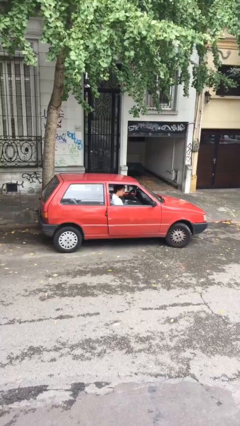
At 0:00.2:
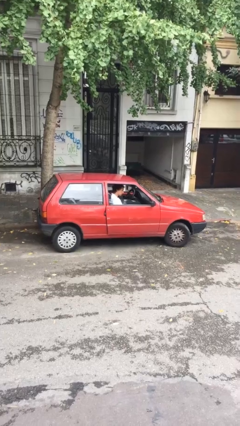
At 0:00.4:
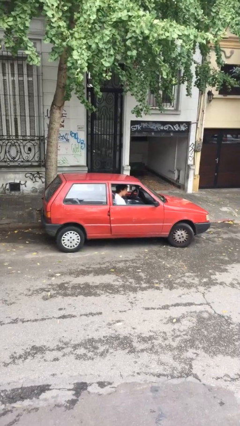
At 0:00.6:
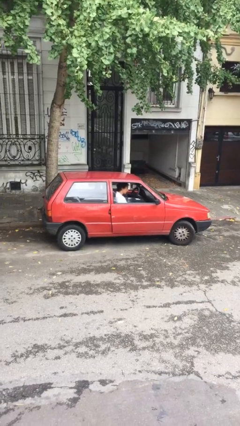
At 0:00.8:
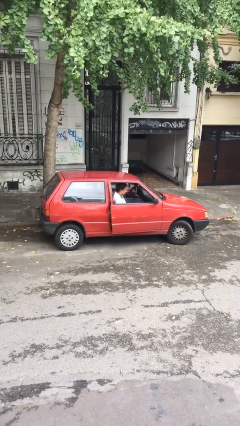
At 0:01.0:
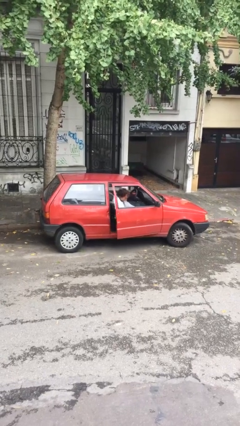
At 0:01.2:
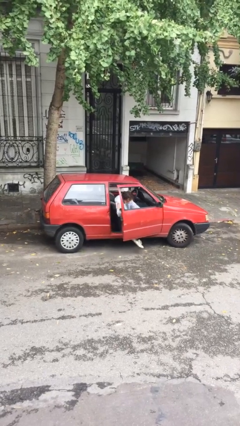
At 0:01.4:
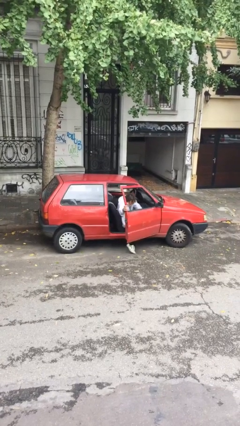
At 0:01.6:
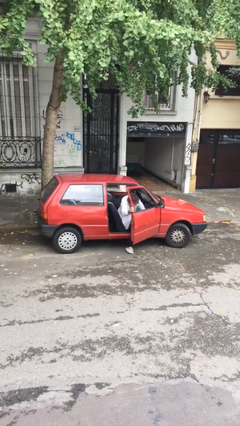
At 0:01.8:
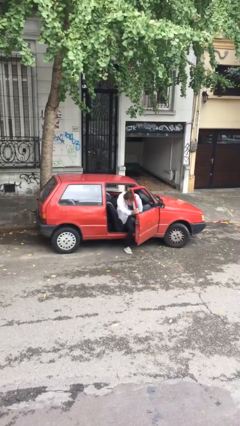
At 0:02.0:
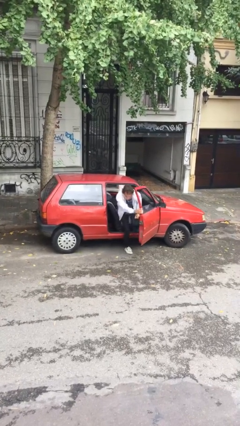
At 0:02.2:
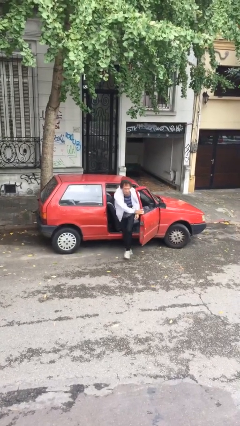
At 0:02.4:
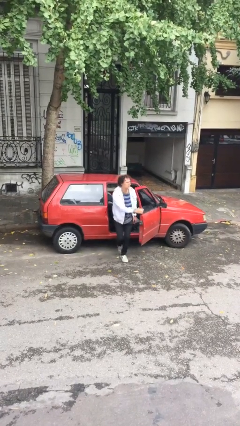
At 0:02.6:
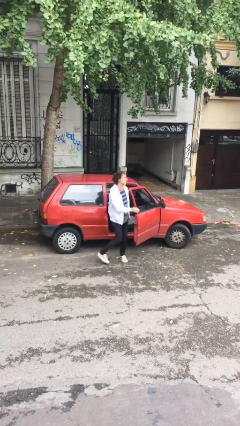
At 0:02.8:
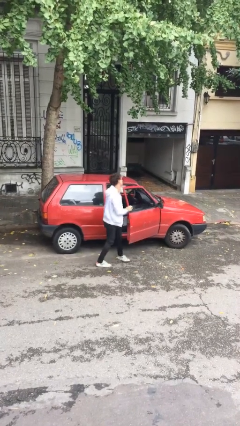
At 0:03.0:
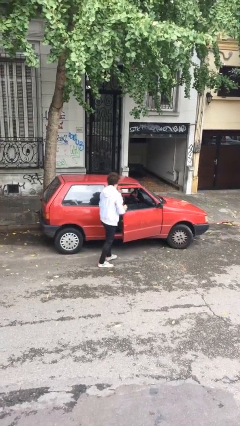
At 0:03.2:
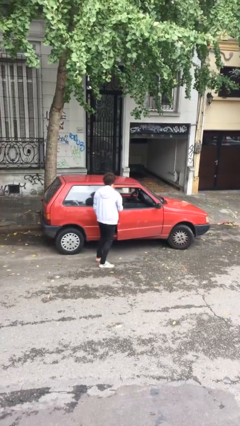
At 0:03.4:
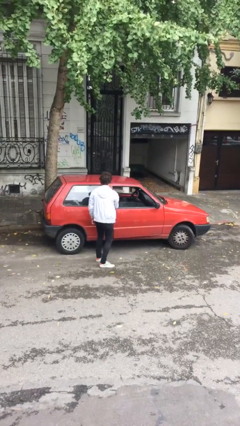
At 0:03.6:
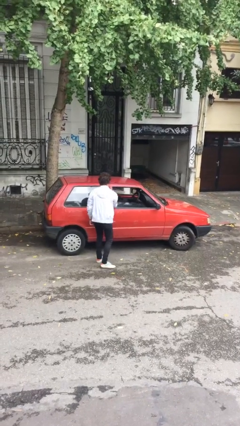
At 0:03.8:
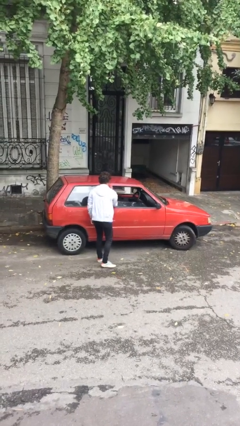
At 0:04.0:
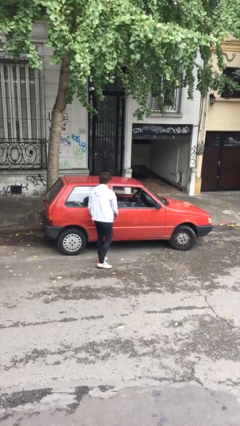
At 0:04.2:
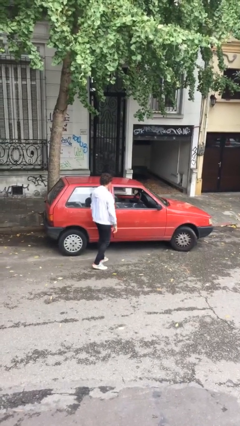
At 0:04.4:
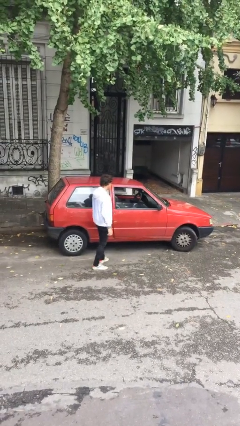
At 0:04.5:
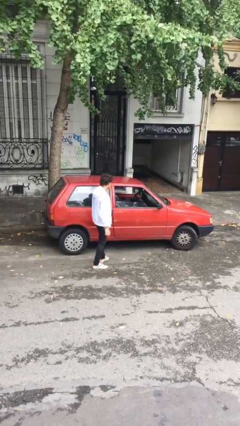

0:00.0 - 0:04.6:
car drops off person

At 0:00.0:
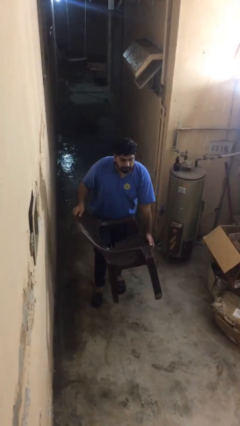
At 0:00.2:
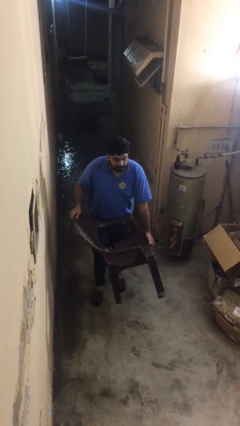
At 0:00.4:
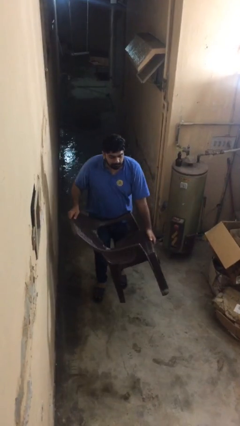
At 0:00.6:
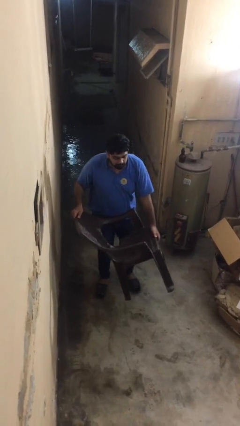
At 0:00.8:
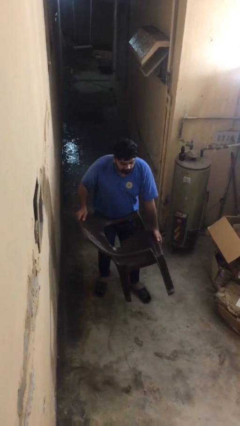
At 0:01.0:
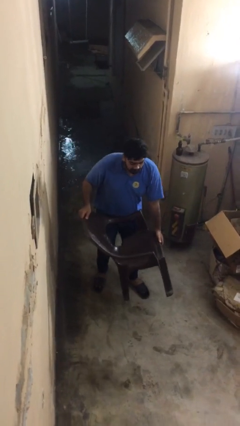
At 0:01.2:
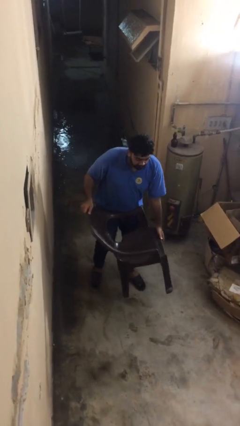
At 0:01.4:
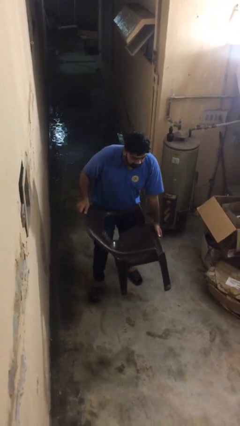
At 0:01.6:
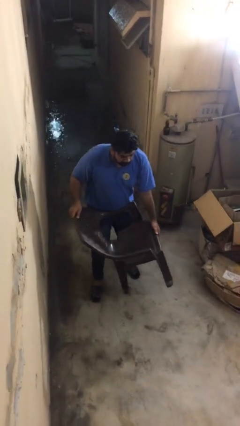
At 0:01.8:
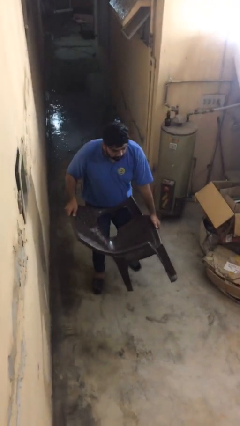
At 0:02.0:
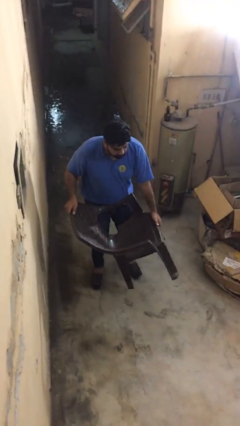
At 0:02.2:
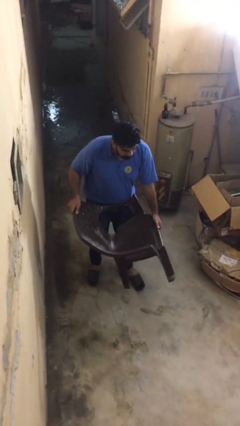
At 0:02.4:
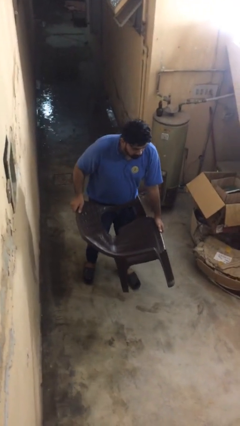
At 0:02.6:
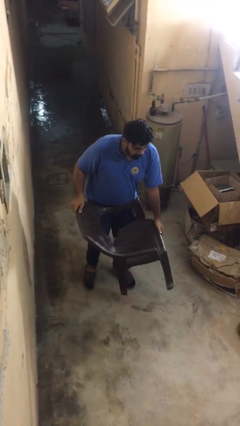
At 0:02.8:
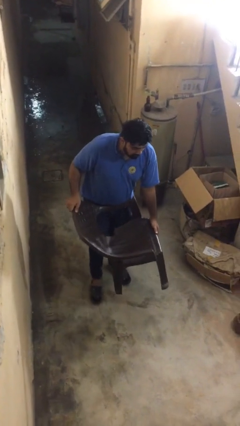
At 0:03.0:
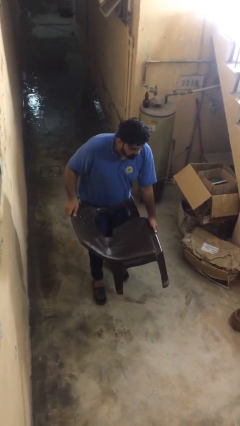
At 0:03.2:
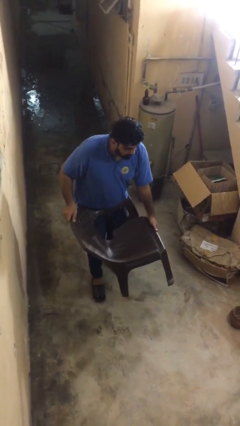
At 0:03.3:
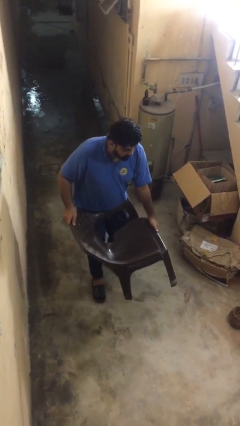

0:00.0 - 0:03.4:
person carries heavy object

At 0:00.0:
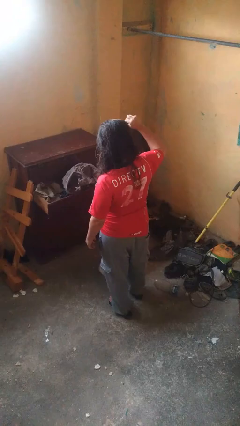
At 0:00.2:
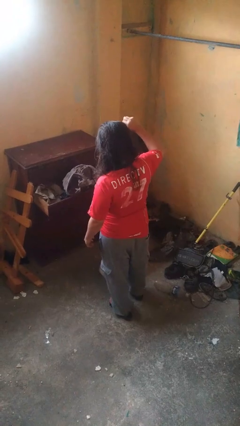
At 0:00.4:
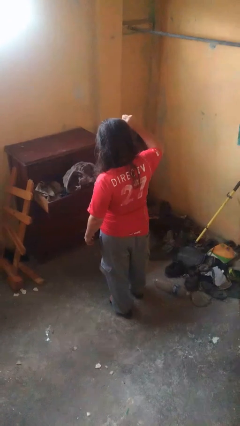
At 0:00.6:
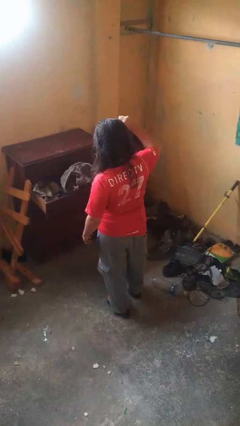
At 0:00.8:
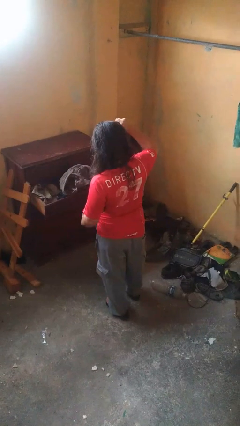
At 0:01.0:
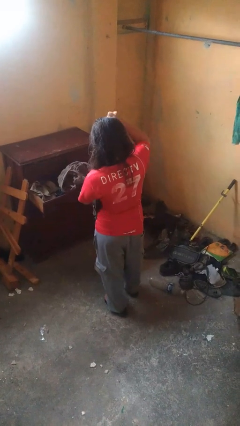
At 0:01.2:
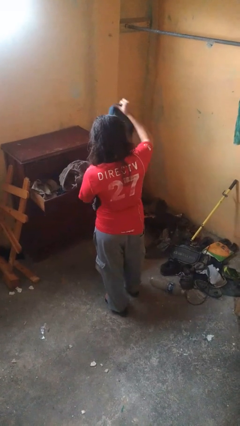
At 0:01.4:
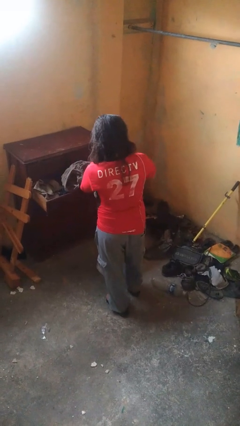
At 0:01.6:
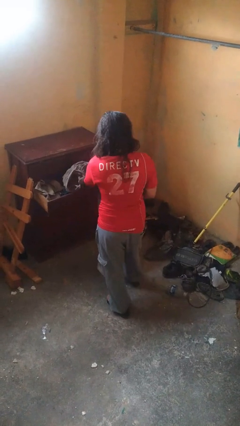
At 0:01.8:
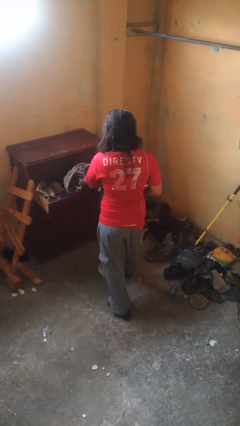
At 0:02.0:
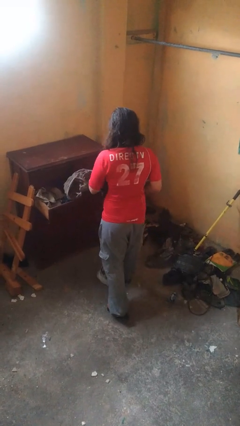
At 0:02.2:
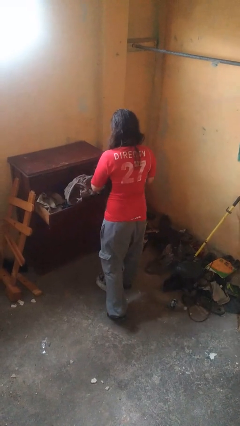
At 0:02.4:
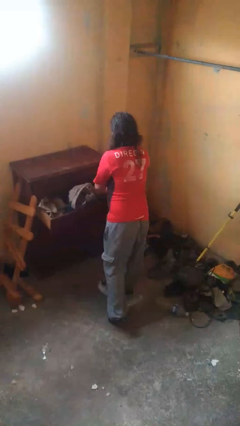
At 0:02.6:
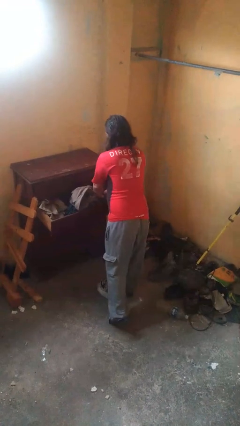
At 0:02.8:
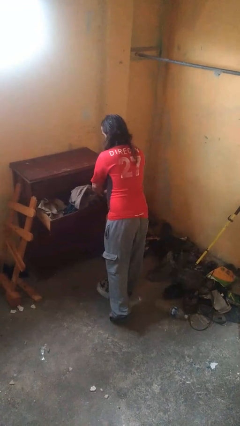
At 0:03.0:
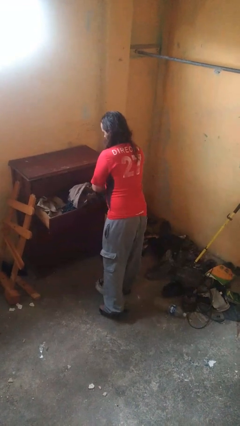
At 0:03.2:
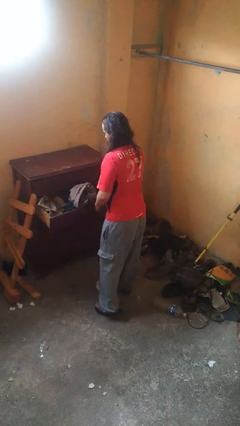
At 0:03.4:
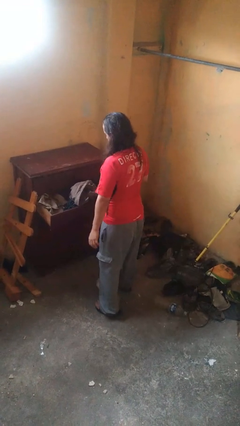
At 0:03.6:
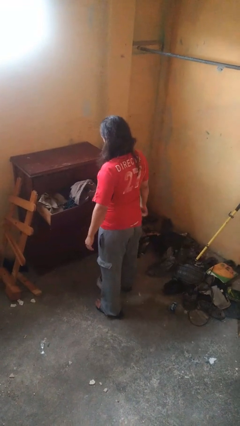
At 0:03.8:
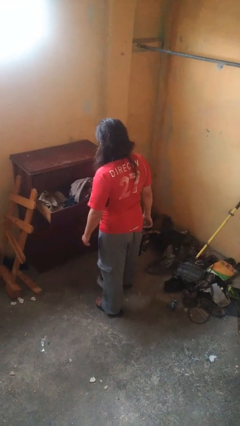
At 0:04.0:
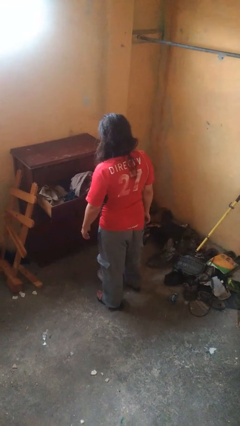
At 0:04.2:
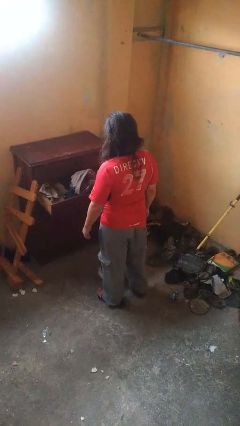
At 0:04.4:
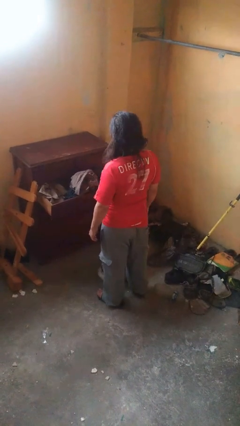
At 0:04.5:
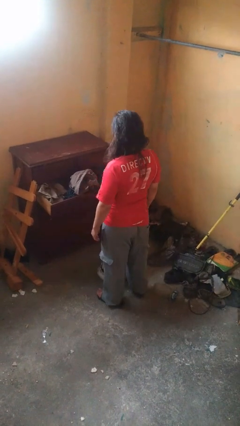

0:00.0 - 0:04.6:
person puts clothes into dresser

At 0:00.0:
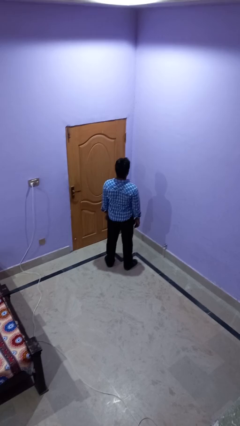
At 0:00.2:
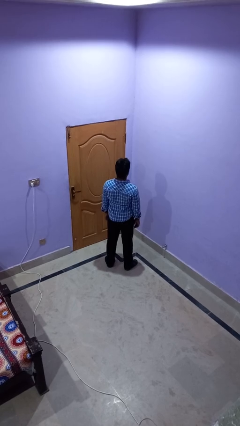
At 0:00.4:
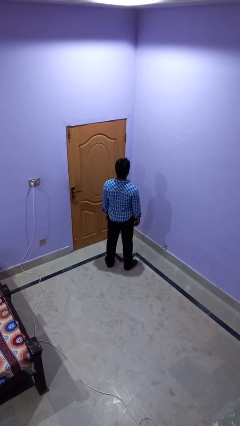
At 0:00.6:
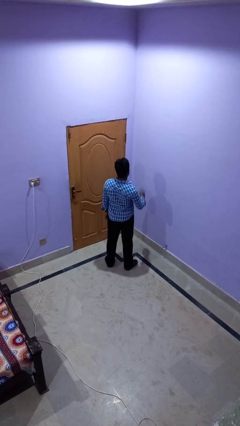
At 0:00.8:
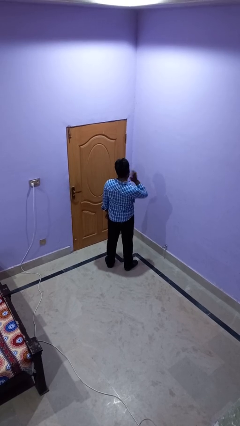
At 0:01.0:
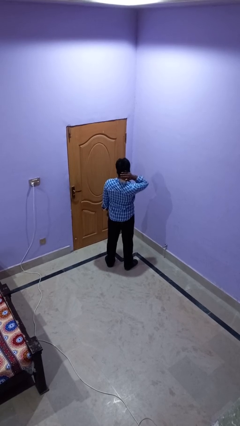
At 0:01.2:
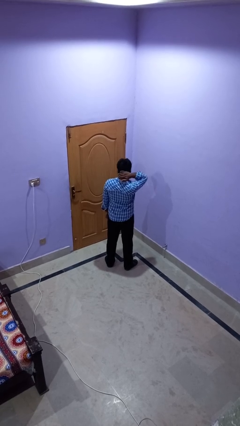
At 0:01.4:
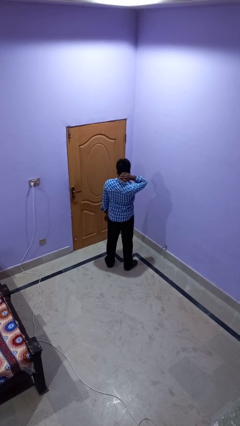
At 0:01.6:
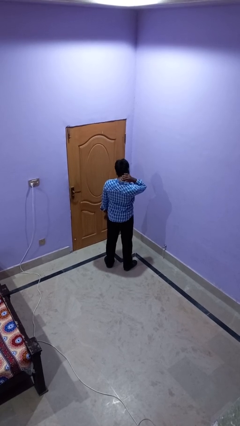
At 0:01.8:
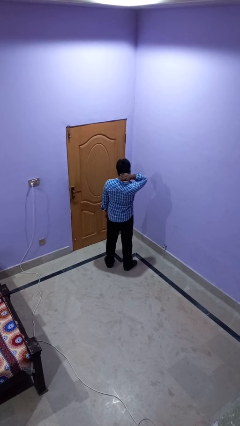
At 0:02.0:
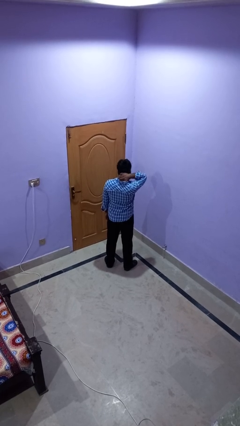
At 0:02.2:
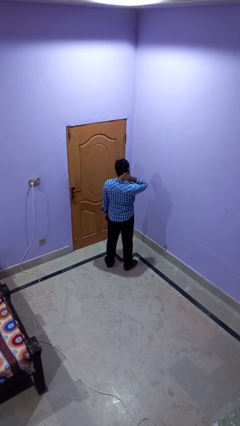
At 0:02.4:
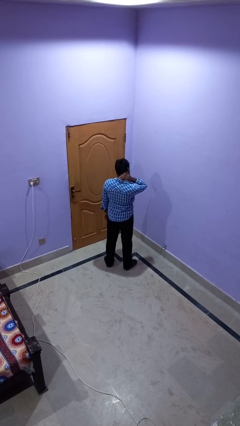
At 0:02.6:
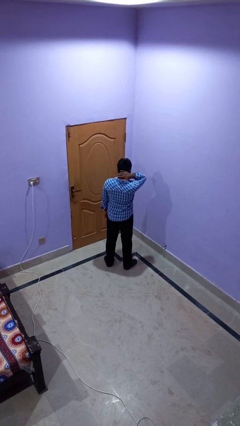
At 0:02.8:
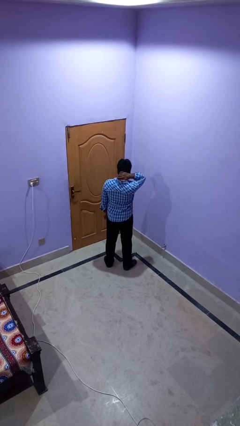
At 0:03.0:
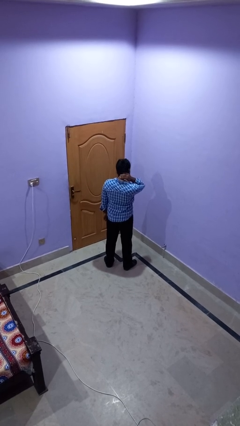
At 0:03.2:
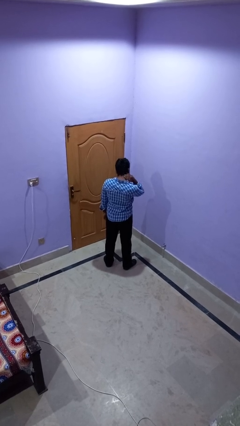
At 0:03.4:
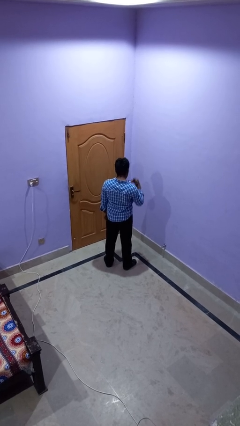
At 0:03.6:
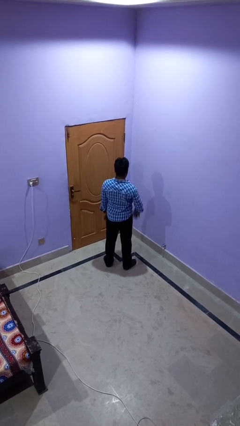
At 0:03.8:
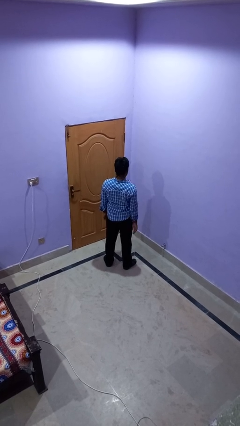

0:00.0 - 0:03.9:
person rubs neck

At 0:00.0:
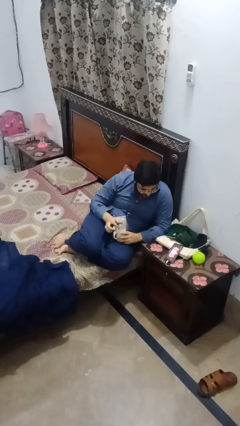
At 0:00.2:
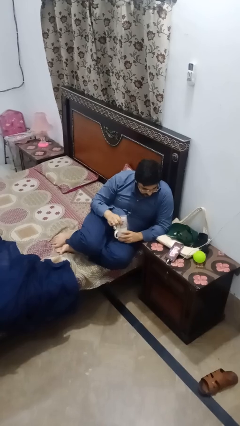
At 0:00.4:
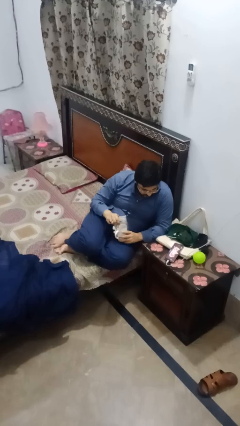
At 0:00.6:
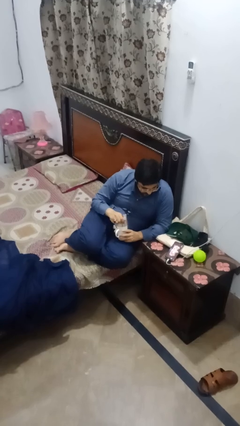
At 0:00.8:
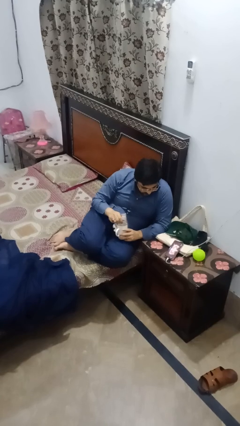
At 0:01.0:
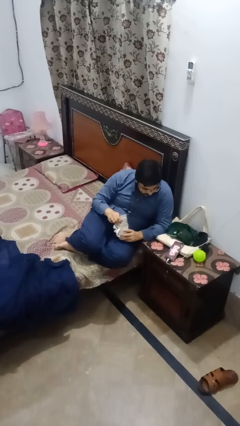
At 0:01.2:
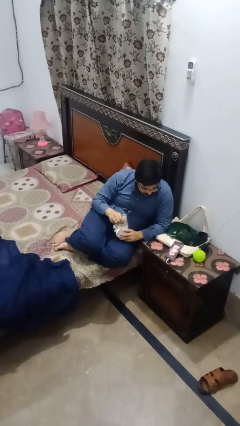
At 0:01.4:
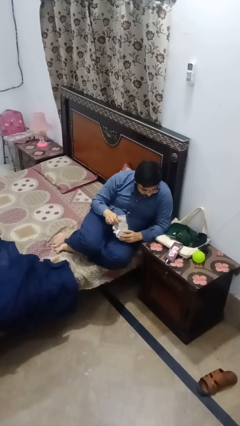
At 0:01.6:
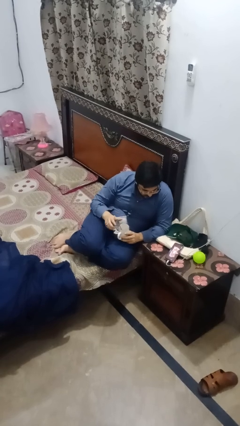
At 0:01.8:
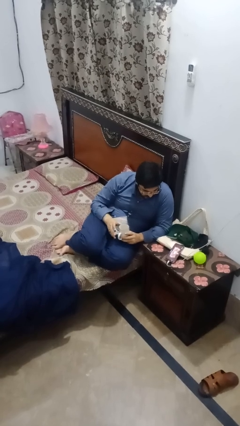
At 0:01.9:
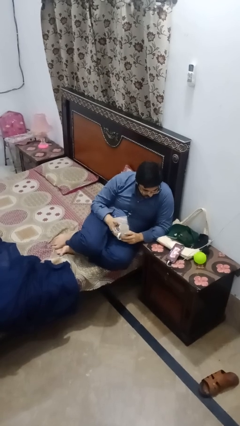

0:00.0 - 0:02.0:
person stirs mug
